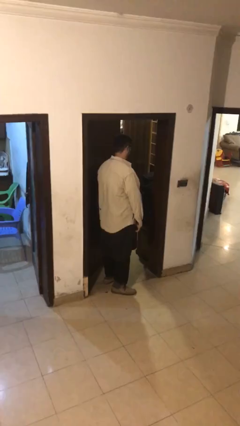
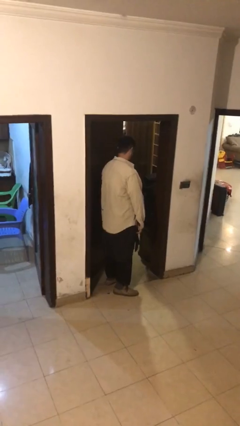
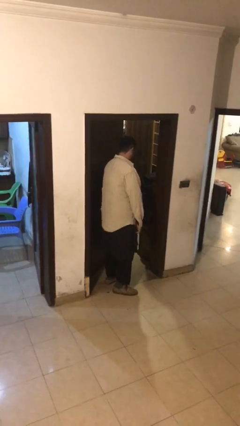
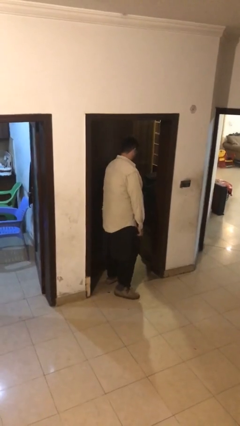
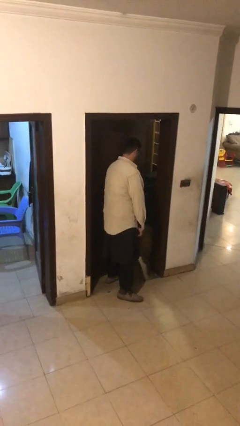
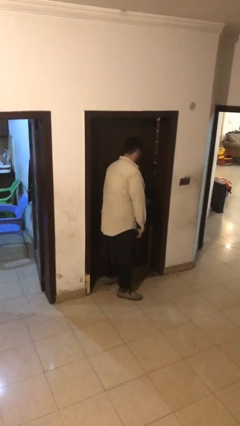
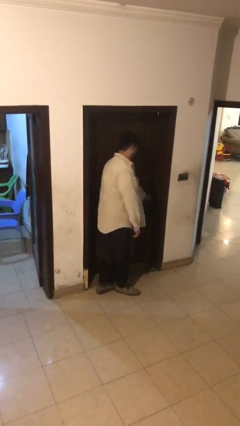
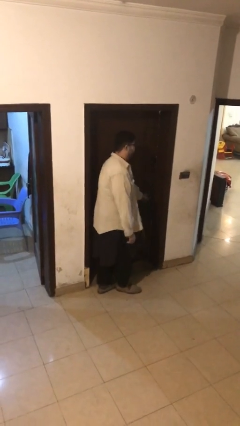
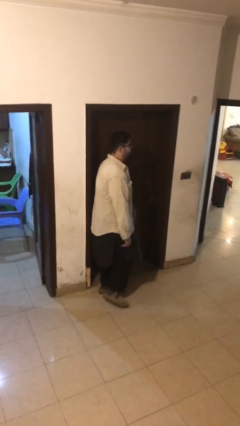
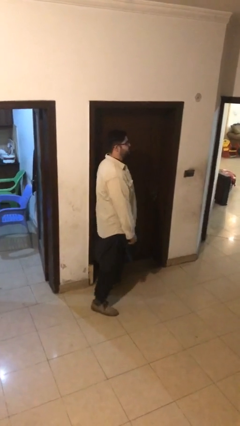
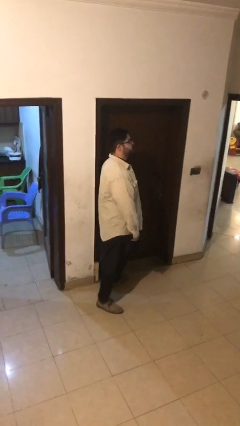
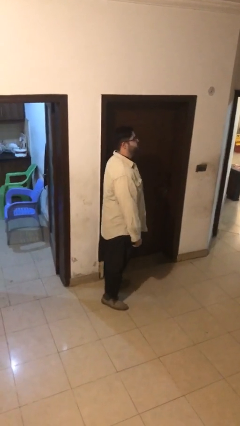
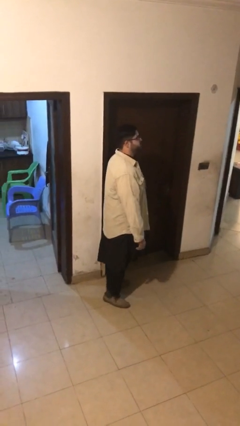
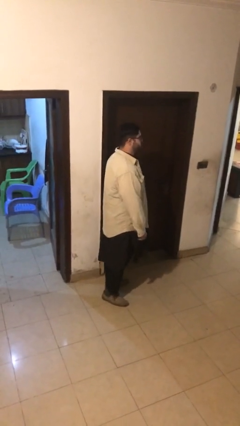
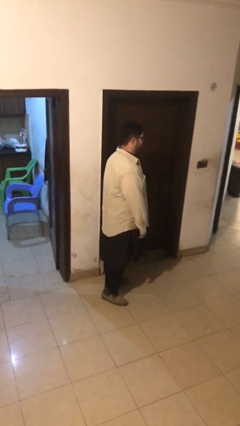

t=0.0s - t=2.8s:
person closes facility door

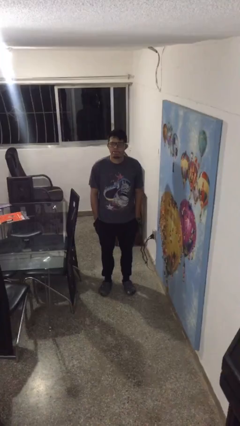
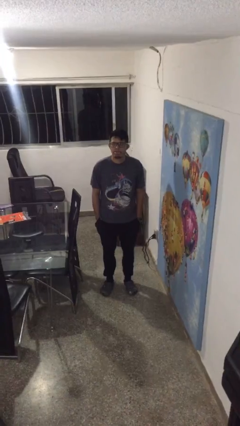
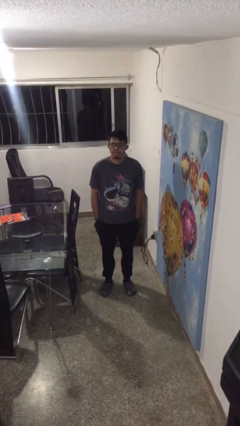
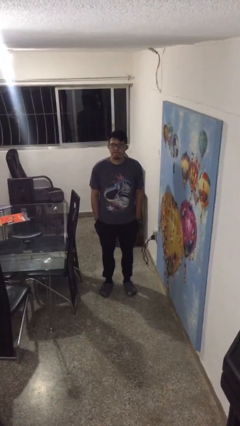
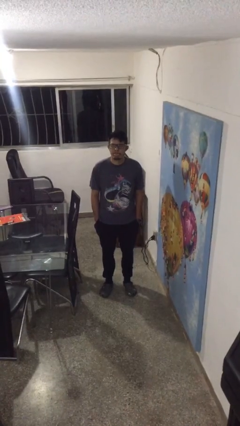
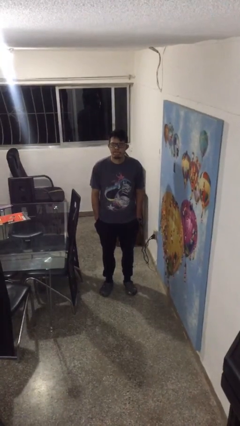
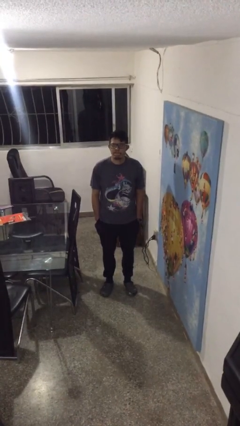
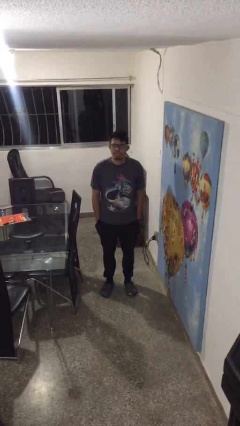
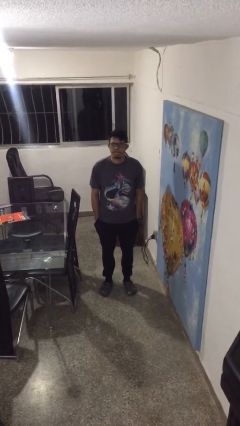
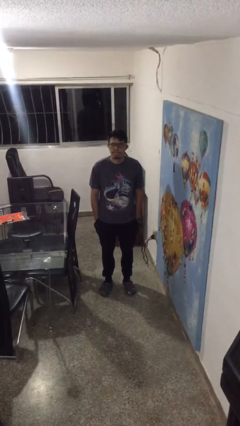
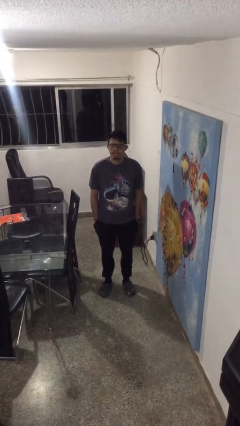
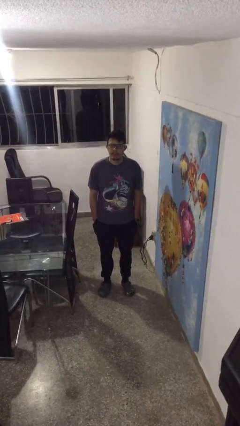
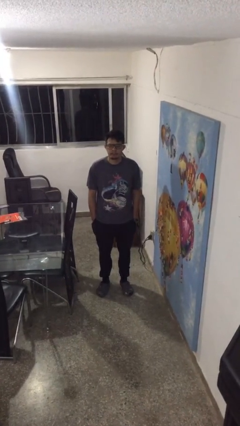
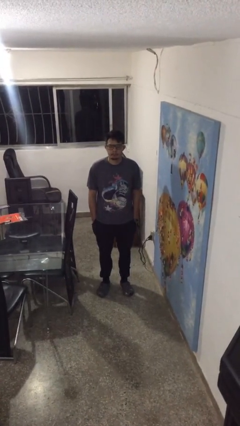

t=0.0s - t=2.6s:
person sticks out tongue

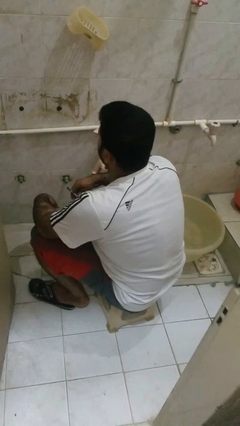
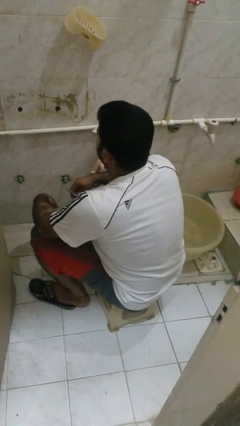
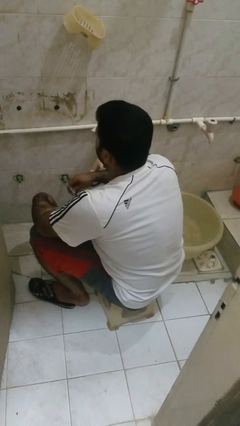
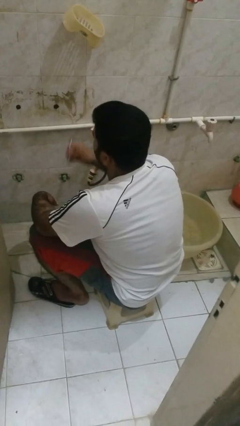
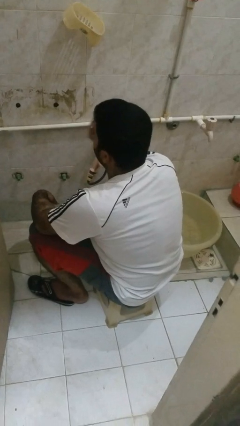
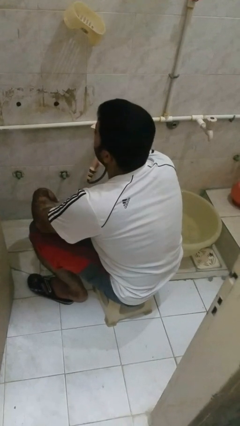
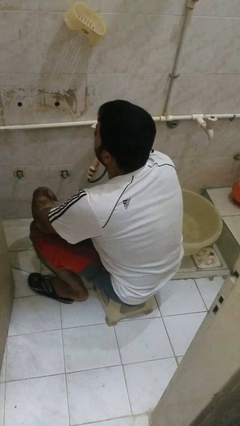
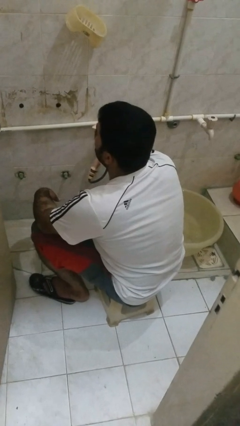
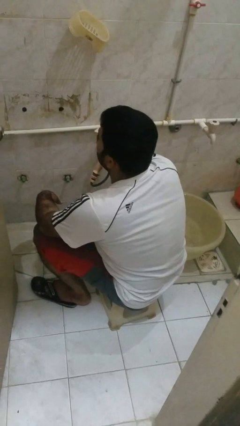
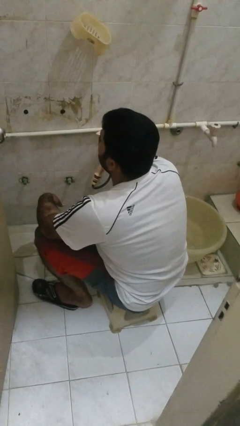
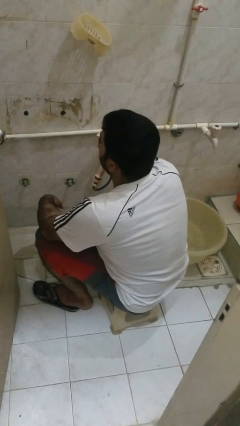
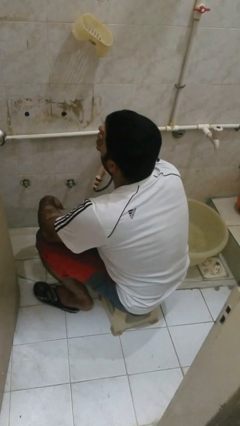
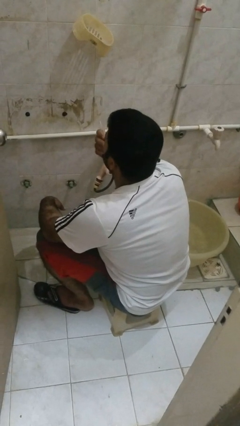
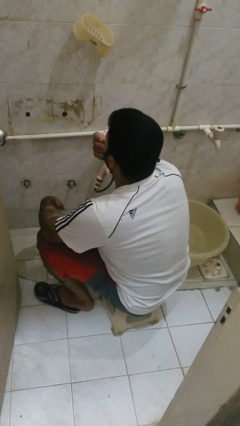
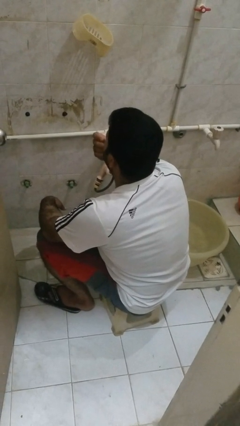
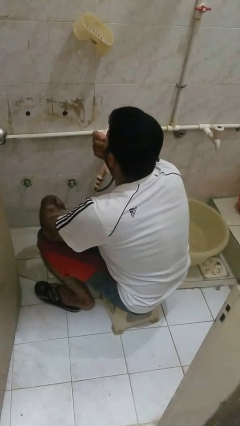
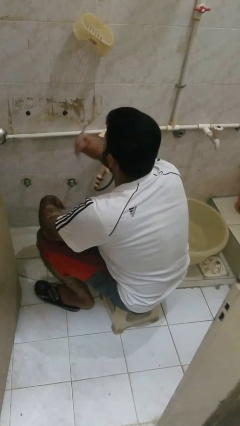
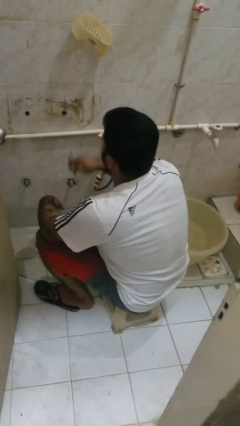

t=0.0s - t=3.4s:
person flosses

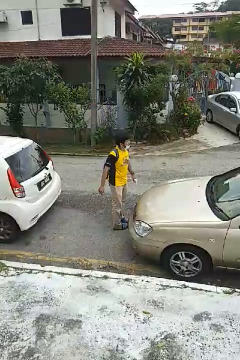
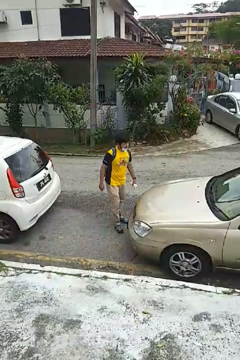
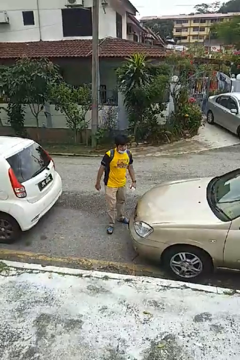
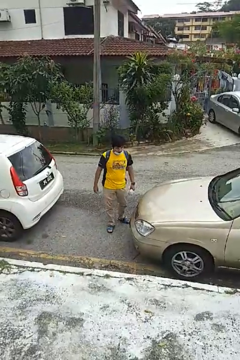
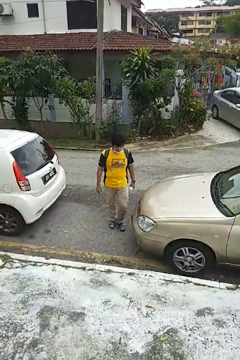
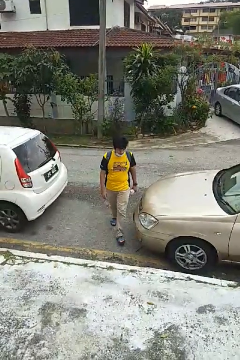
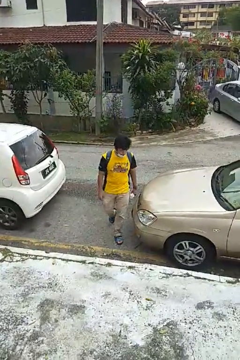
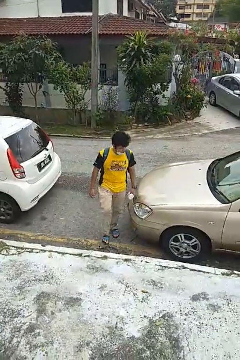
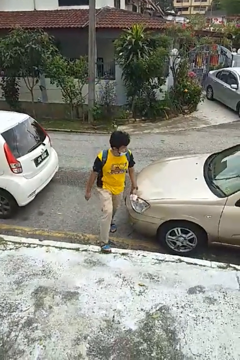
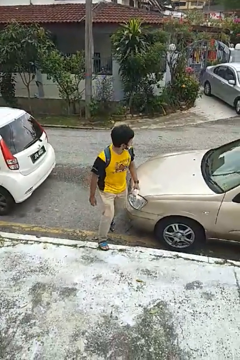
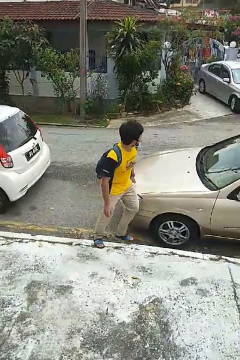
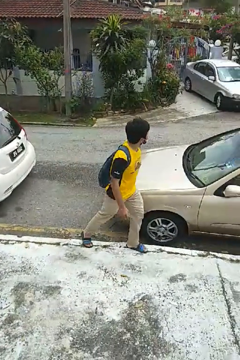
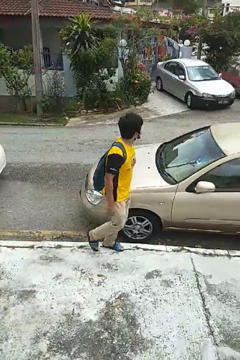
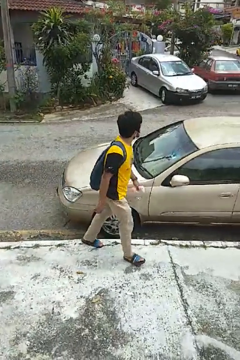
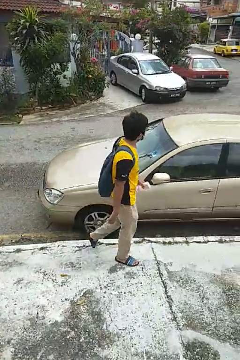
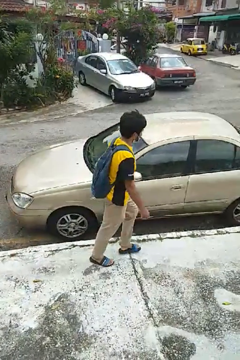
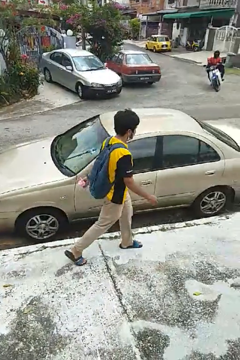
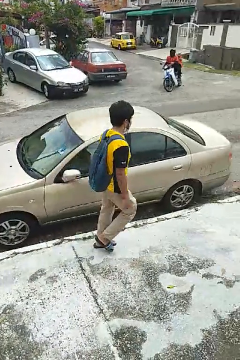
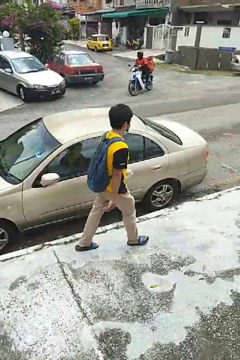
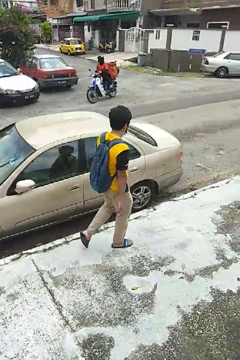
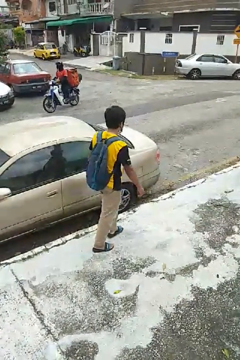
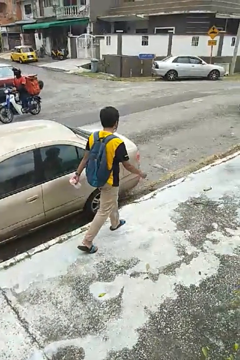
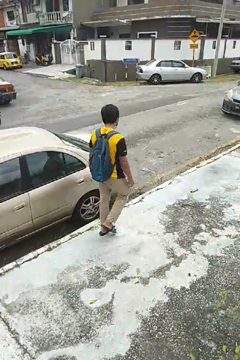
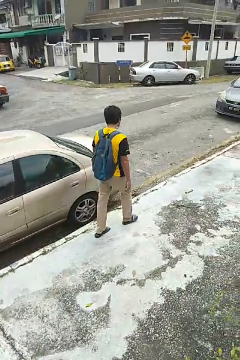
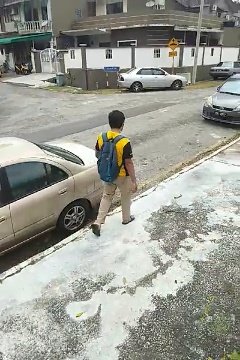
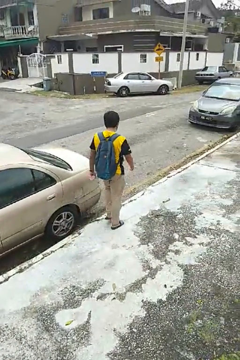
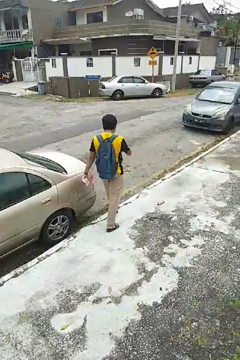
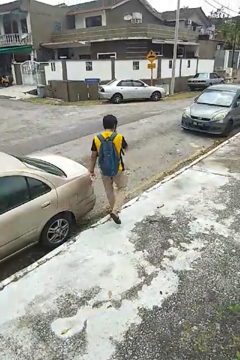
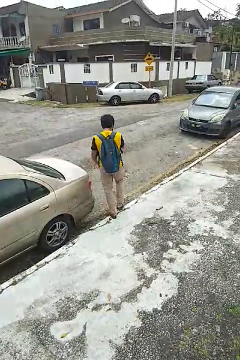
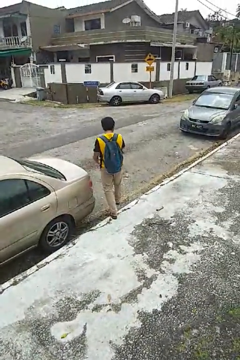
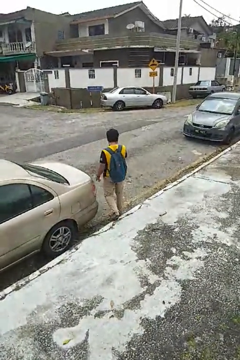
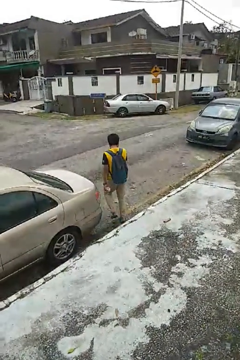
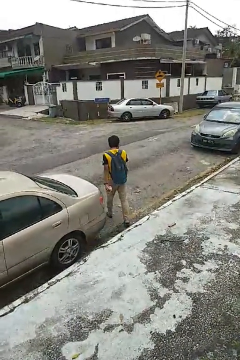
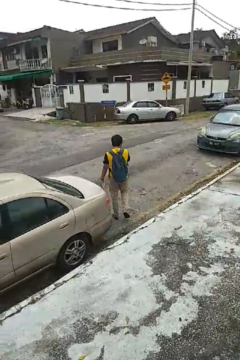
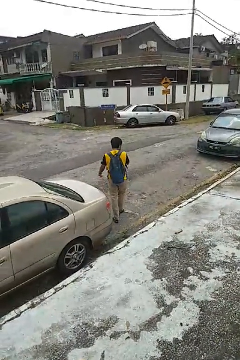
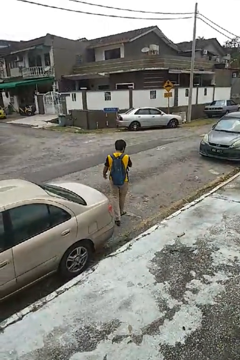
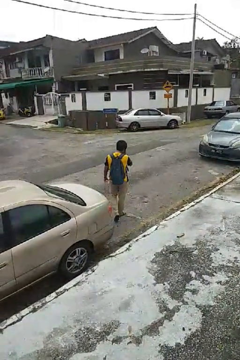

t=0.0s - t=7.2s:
person walks around car

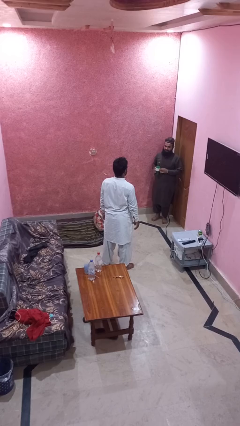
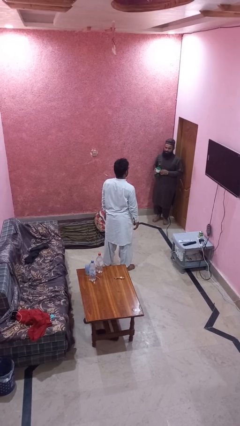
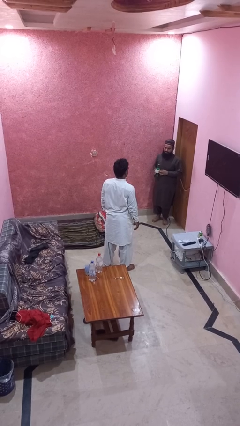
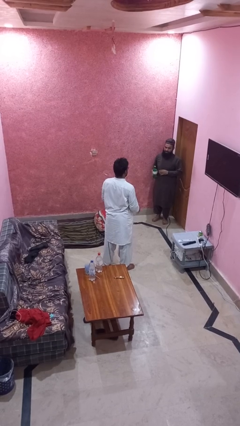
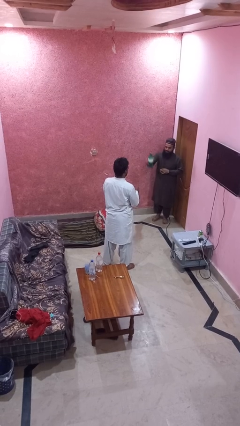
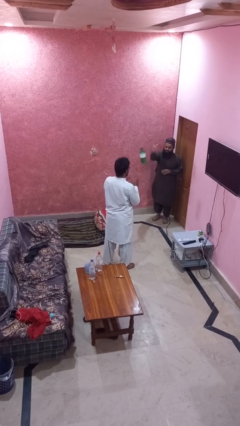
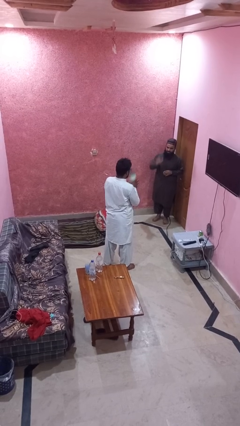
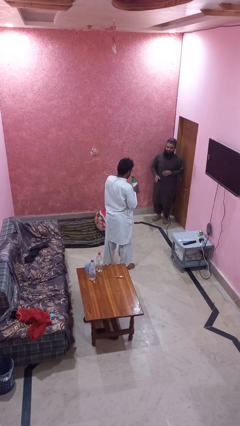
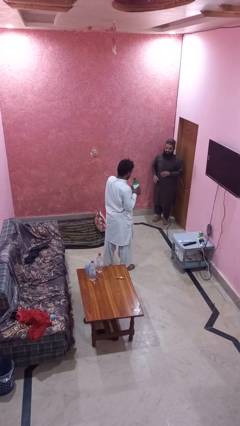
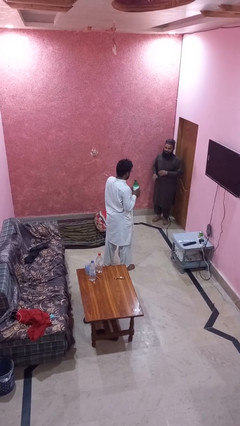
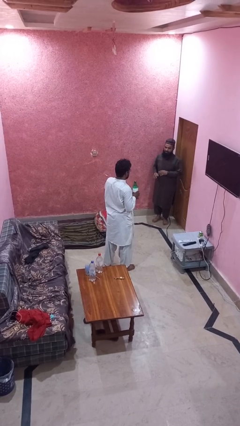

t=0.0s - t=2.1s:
person catches object from person

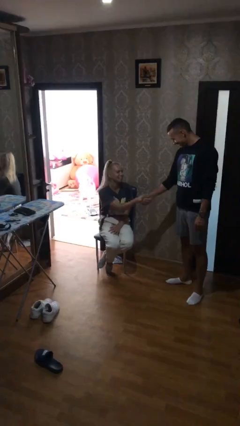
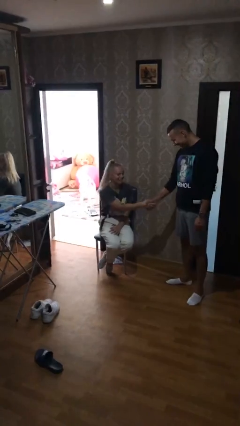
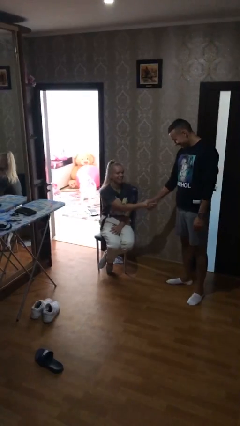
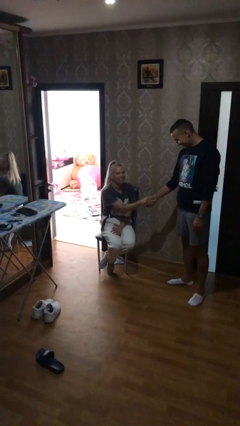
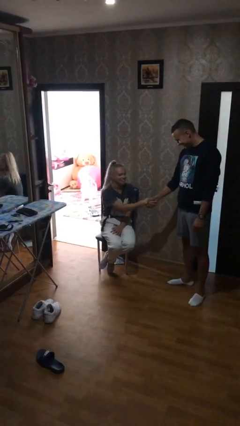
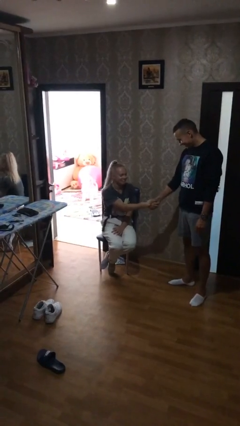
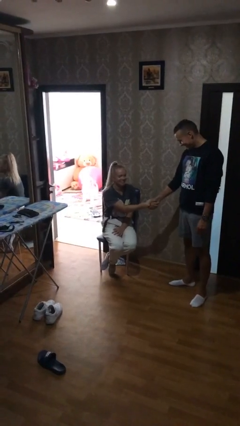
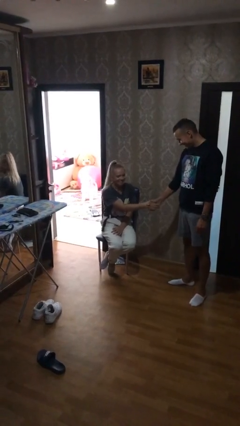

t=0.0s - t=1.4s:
person shakes hand
